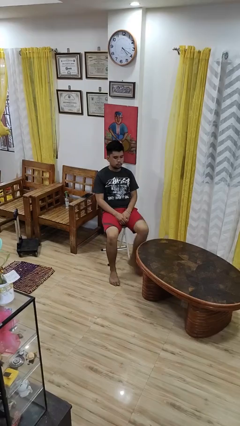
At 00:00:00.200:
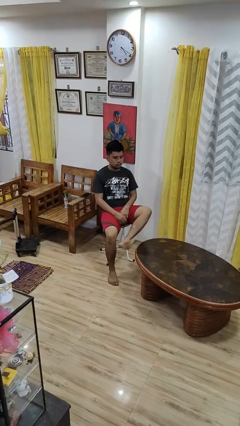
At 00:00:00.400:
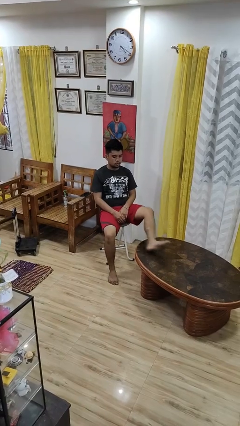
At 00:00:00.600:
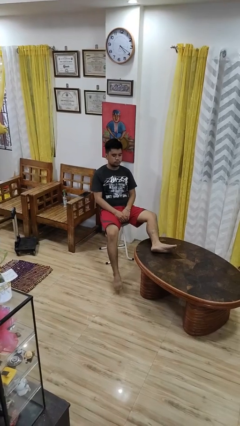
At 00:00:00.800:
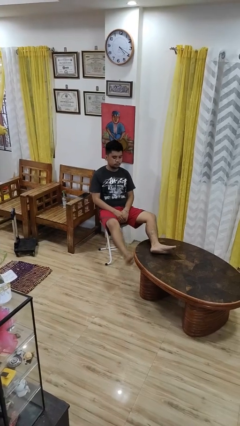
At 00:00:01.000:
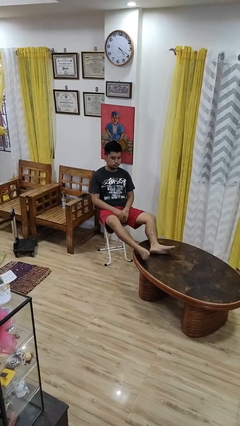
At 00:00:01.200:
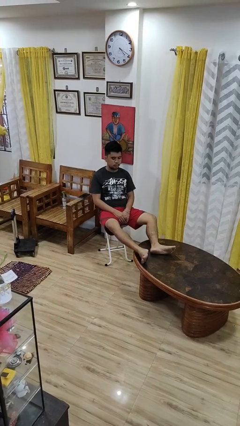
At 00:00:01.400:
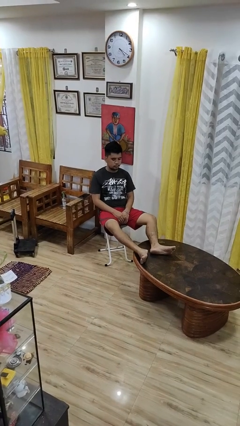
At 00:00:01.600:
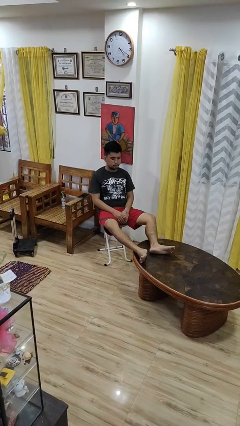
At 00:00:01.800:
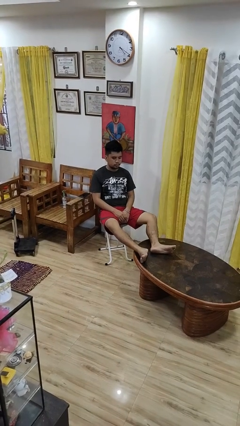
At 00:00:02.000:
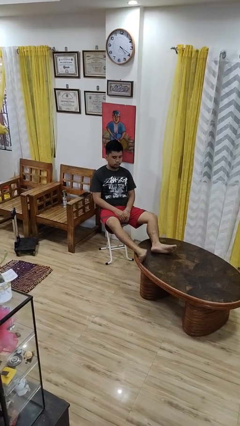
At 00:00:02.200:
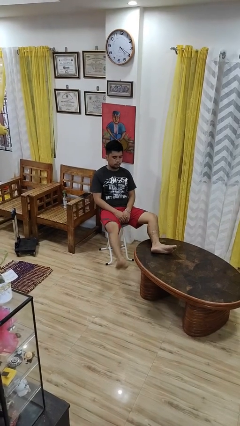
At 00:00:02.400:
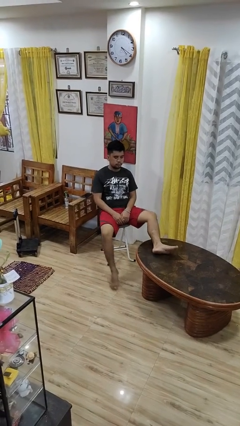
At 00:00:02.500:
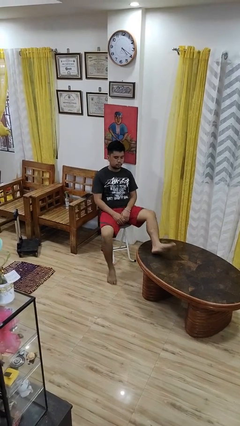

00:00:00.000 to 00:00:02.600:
person puts feet up

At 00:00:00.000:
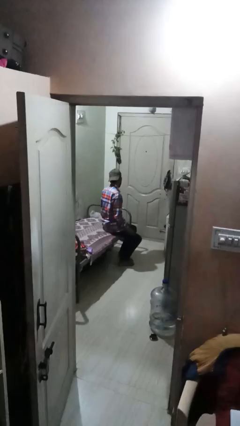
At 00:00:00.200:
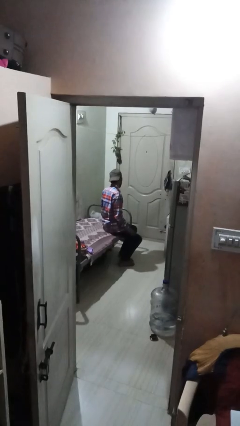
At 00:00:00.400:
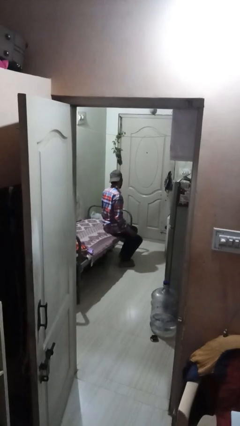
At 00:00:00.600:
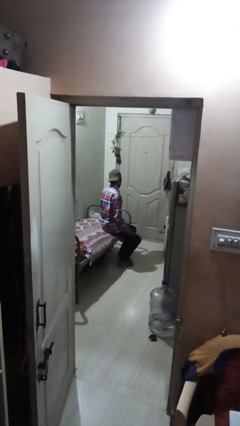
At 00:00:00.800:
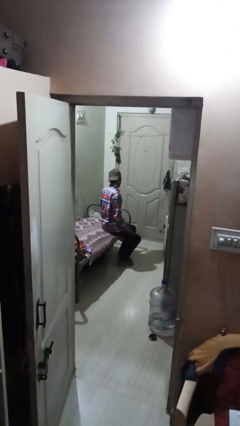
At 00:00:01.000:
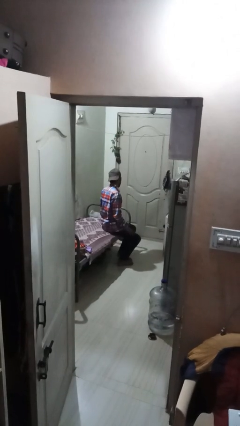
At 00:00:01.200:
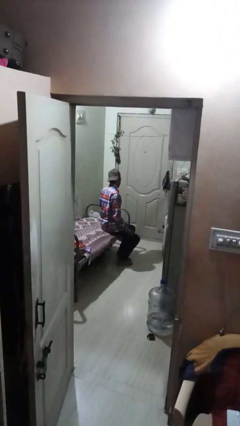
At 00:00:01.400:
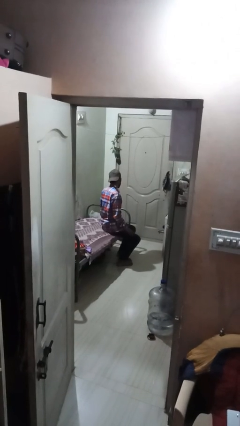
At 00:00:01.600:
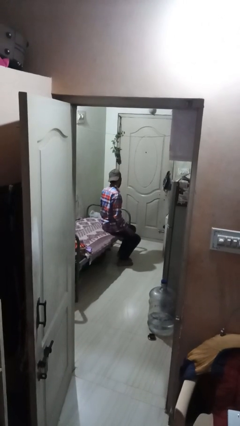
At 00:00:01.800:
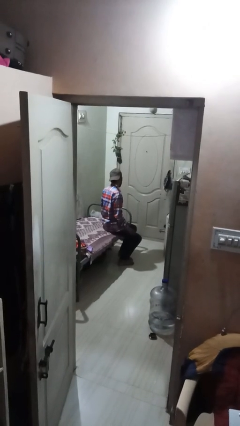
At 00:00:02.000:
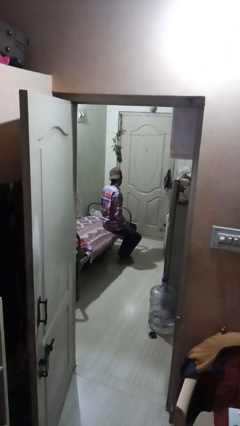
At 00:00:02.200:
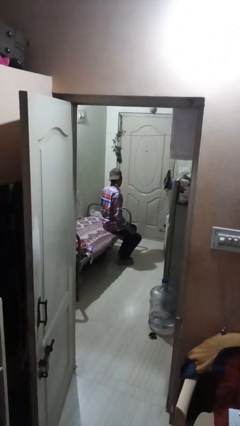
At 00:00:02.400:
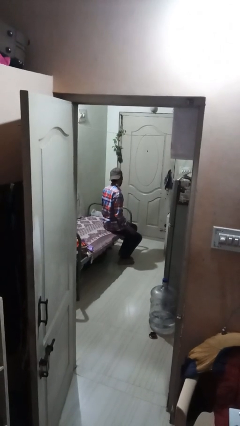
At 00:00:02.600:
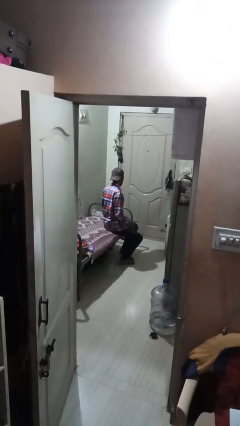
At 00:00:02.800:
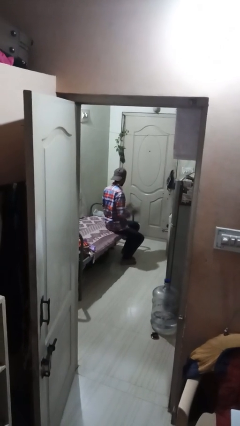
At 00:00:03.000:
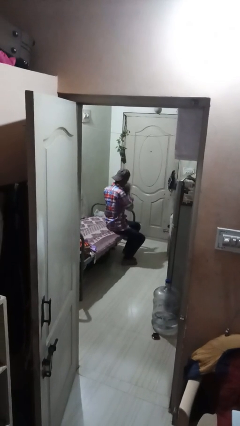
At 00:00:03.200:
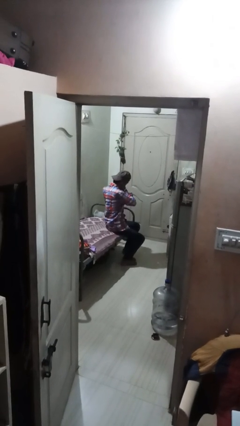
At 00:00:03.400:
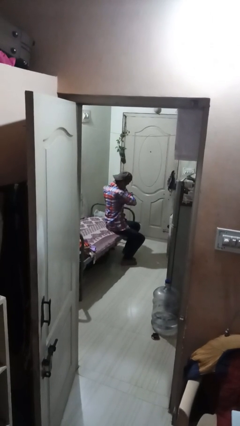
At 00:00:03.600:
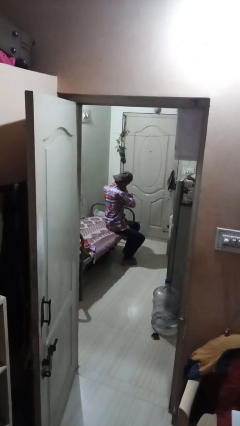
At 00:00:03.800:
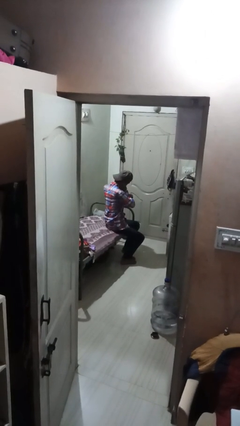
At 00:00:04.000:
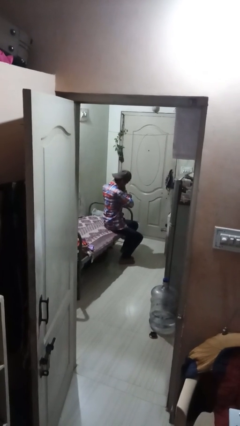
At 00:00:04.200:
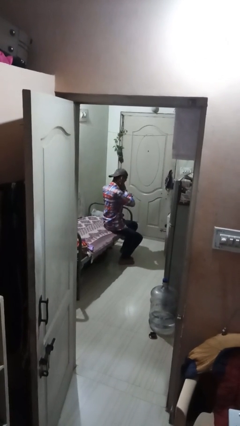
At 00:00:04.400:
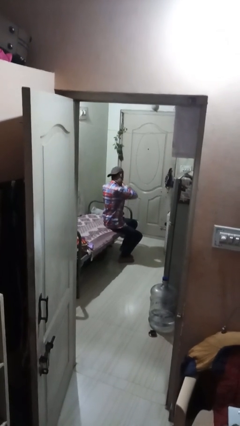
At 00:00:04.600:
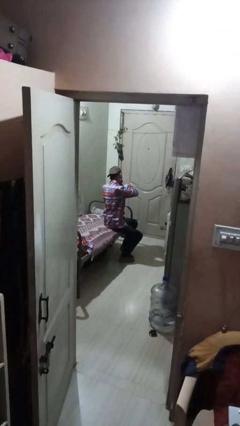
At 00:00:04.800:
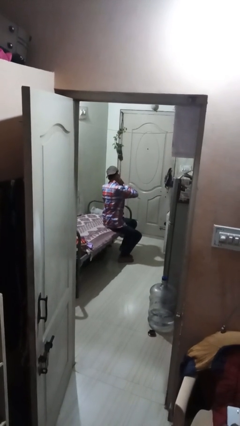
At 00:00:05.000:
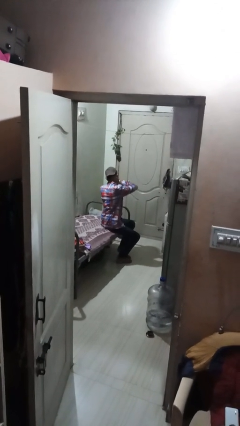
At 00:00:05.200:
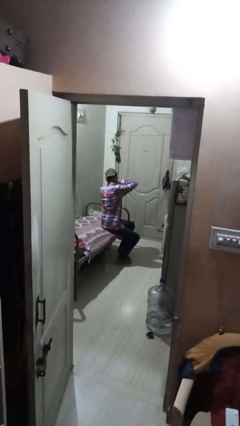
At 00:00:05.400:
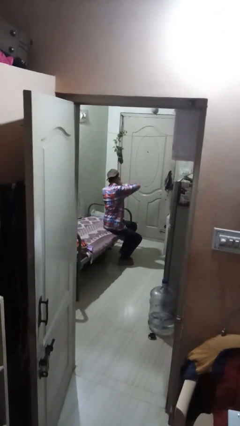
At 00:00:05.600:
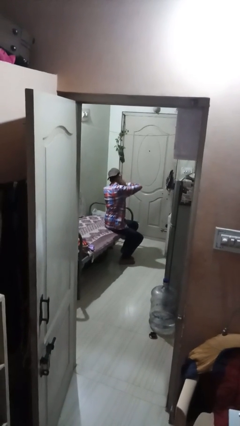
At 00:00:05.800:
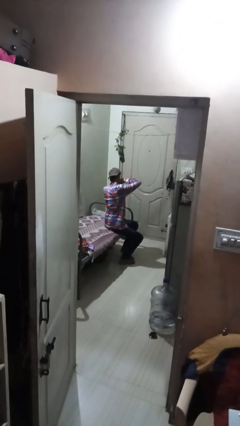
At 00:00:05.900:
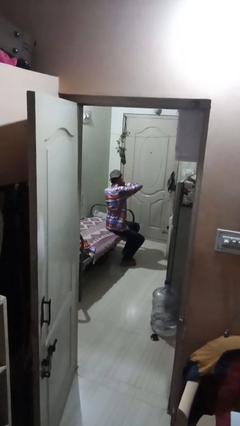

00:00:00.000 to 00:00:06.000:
person rubs neck

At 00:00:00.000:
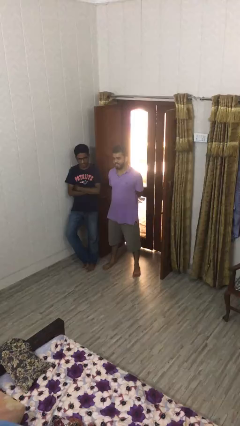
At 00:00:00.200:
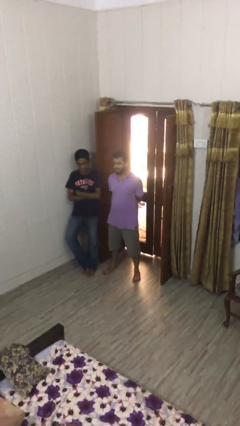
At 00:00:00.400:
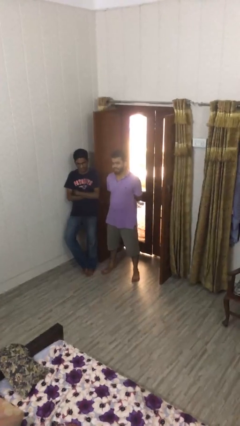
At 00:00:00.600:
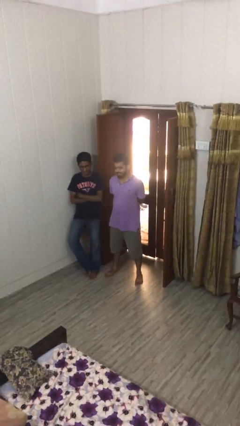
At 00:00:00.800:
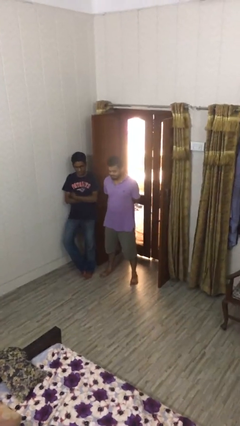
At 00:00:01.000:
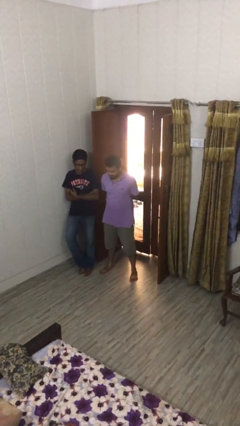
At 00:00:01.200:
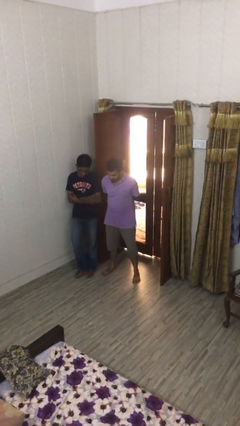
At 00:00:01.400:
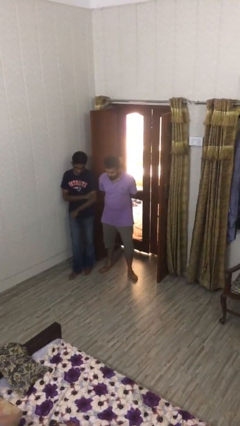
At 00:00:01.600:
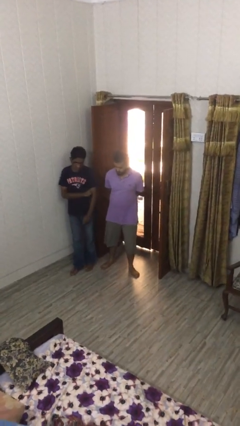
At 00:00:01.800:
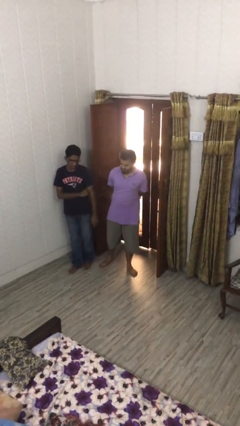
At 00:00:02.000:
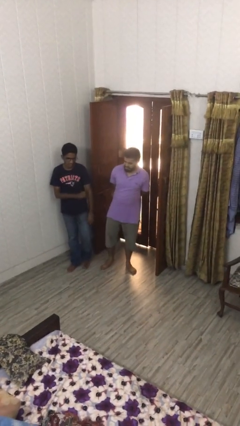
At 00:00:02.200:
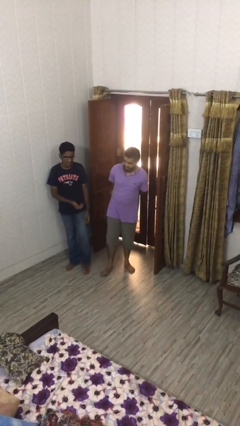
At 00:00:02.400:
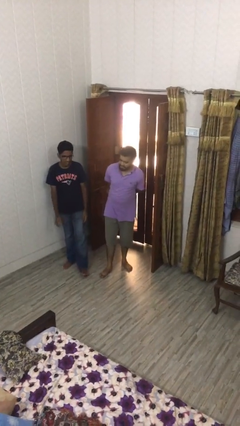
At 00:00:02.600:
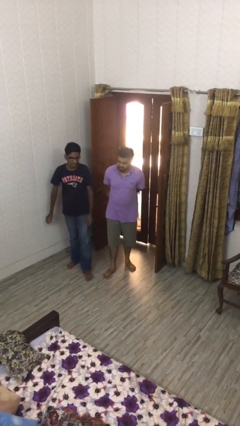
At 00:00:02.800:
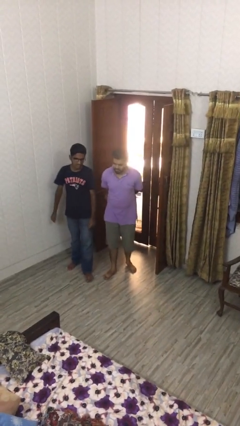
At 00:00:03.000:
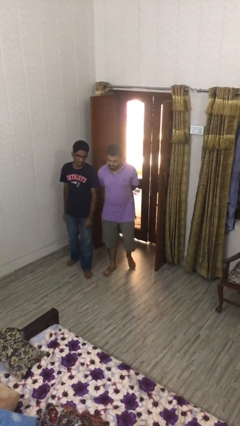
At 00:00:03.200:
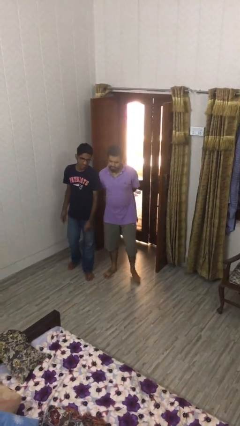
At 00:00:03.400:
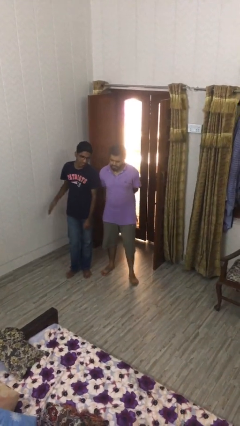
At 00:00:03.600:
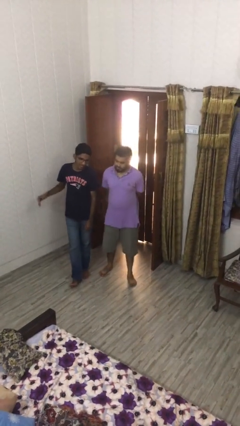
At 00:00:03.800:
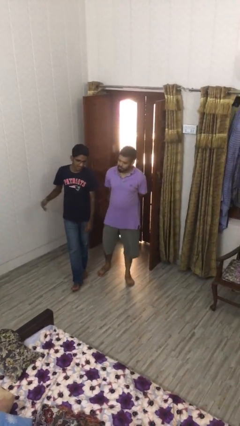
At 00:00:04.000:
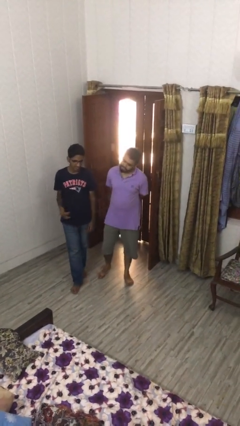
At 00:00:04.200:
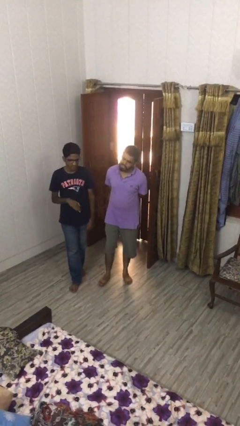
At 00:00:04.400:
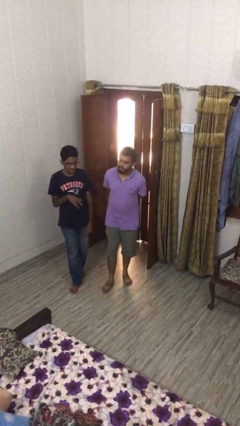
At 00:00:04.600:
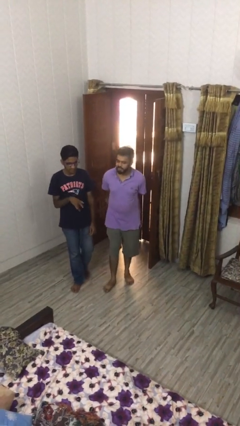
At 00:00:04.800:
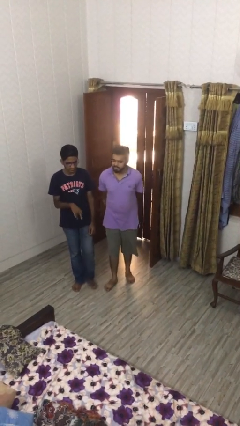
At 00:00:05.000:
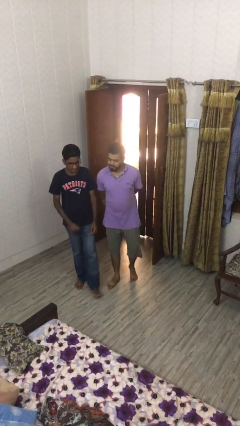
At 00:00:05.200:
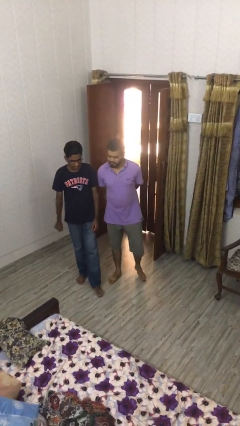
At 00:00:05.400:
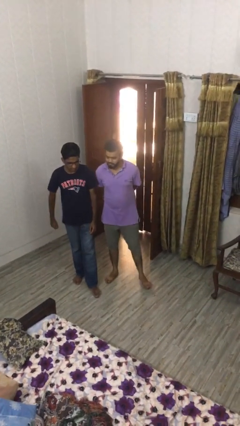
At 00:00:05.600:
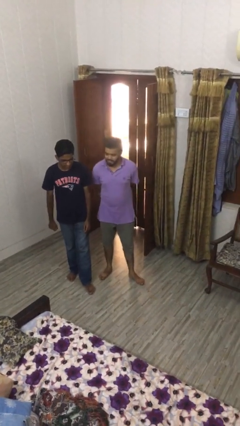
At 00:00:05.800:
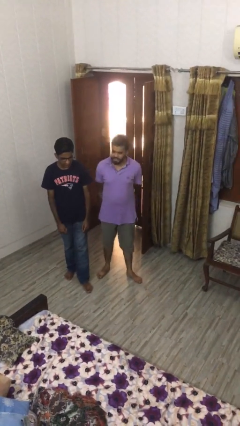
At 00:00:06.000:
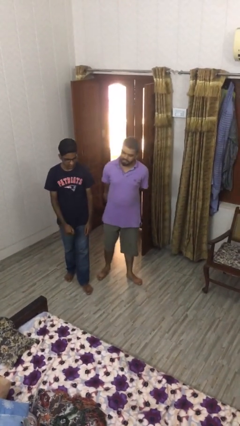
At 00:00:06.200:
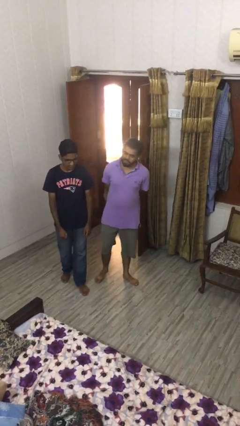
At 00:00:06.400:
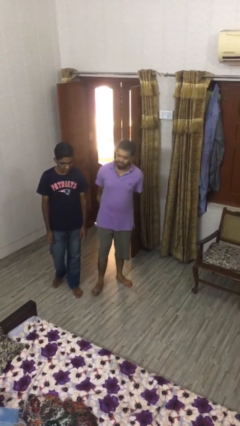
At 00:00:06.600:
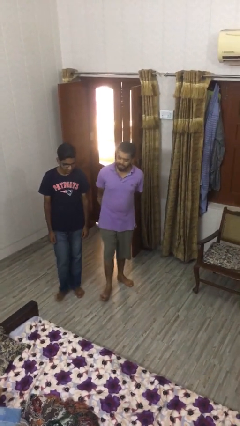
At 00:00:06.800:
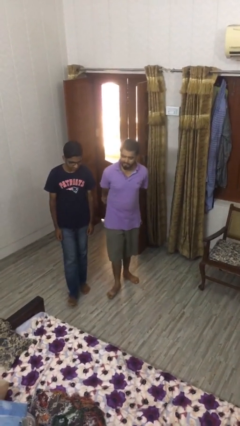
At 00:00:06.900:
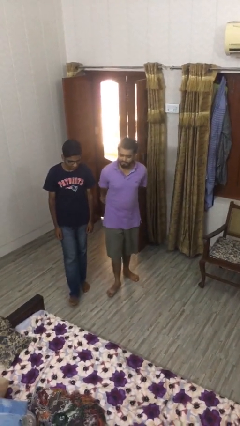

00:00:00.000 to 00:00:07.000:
person talks to person

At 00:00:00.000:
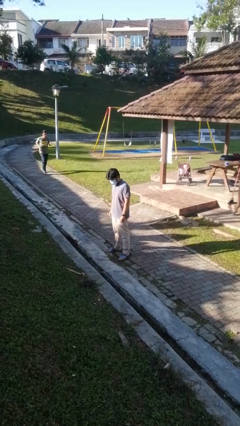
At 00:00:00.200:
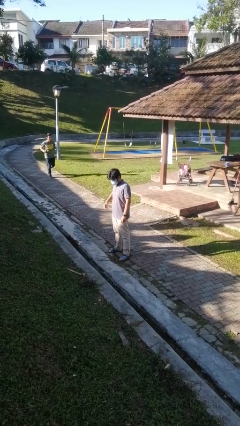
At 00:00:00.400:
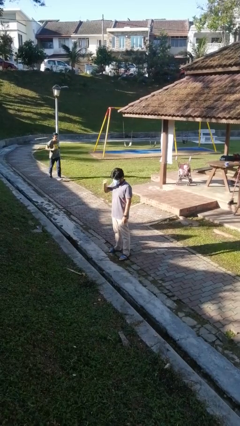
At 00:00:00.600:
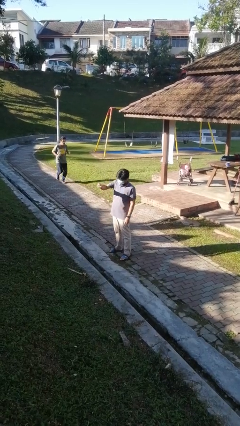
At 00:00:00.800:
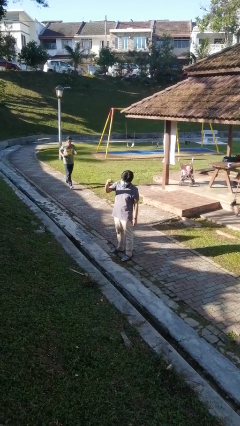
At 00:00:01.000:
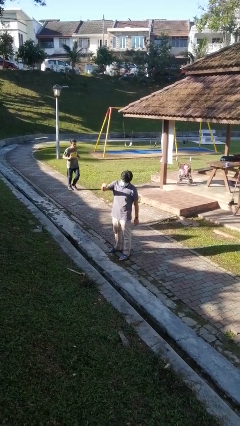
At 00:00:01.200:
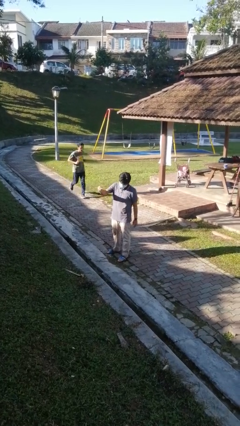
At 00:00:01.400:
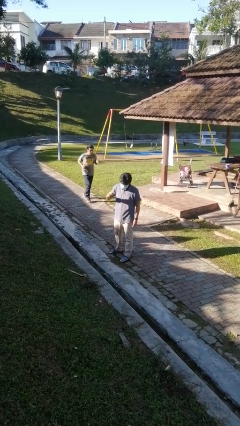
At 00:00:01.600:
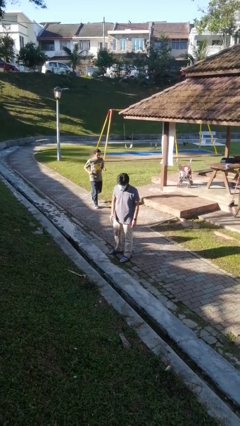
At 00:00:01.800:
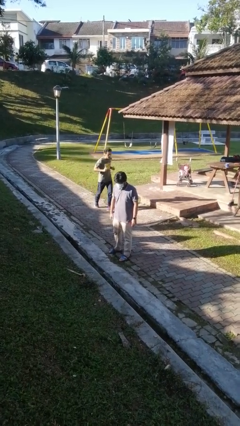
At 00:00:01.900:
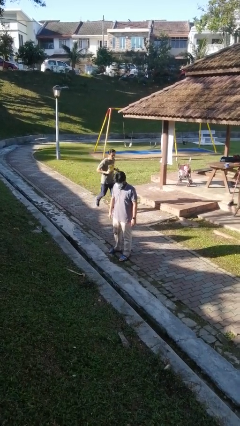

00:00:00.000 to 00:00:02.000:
person snaps fingers

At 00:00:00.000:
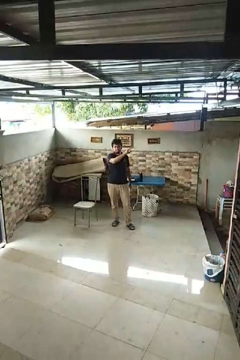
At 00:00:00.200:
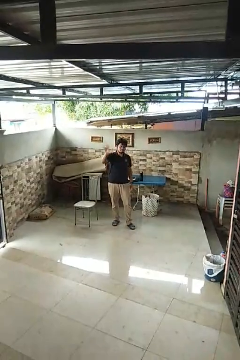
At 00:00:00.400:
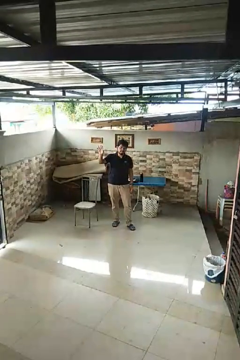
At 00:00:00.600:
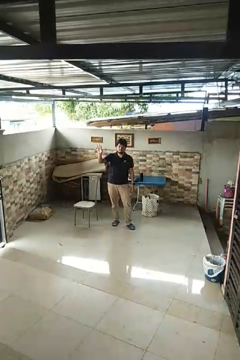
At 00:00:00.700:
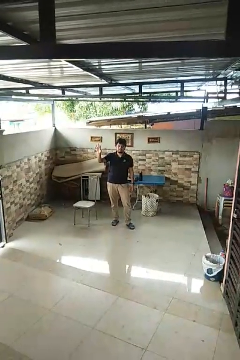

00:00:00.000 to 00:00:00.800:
person gestures swipe right
